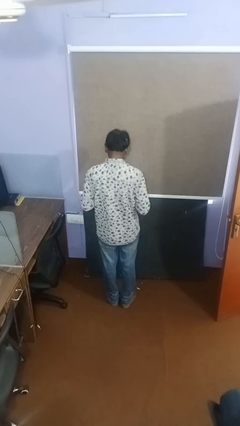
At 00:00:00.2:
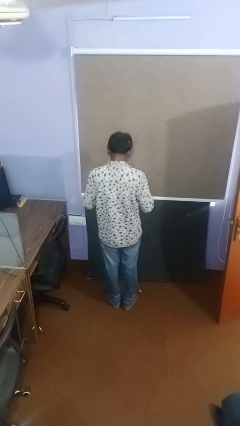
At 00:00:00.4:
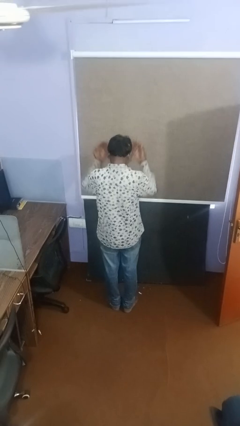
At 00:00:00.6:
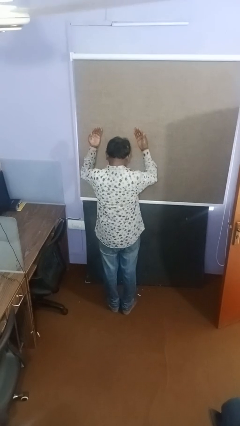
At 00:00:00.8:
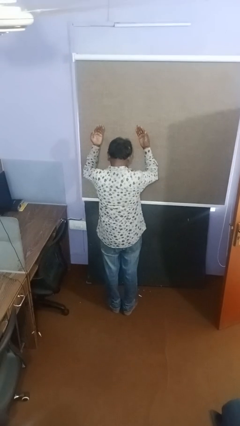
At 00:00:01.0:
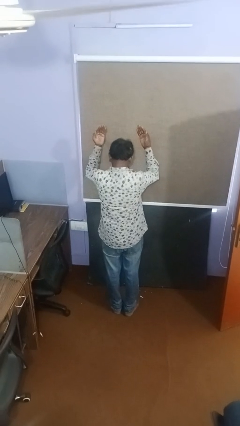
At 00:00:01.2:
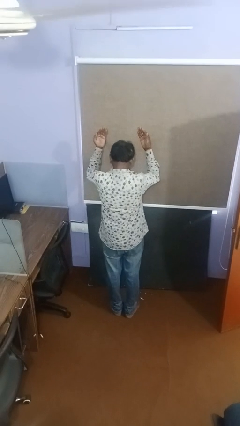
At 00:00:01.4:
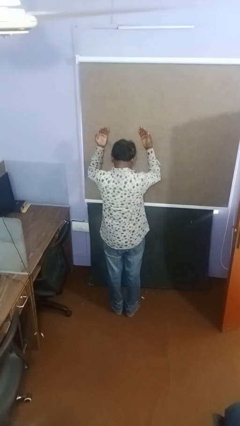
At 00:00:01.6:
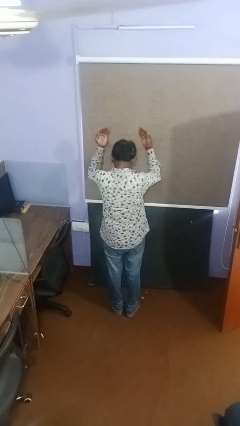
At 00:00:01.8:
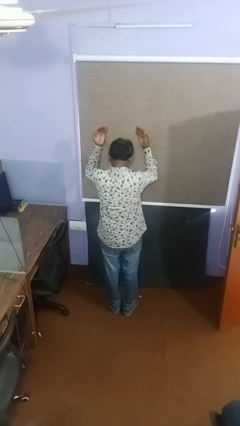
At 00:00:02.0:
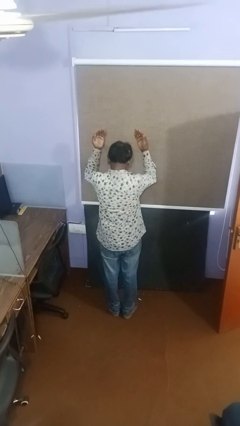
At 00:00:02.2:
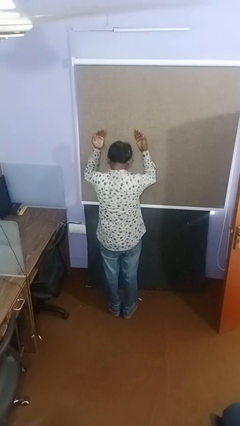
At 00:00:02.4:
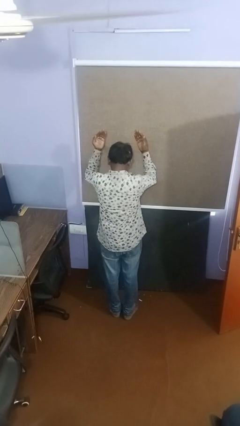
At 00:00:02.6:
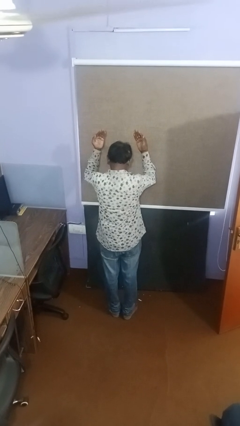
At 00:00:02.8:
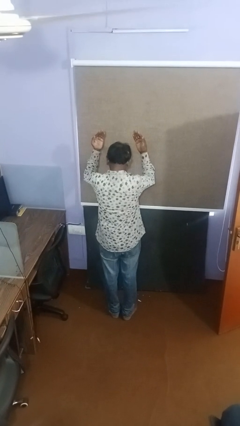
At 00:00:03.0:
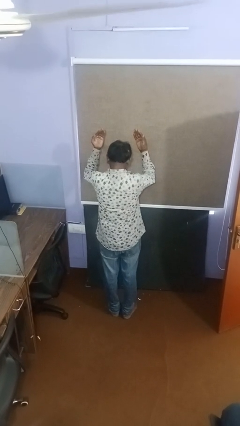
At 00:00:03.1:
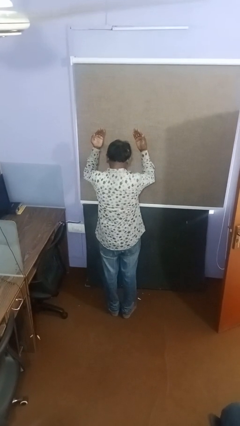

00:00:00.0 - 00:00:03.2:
person gestures swipe up

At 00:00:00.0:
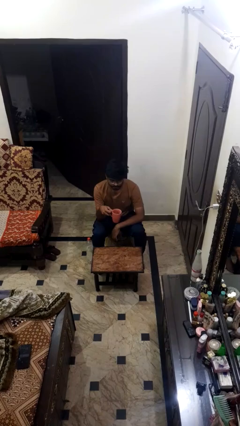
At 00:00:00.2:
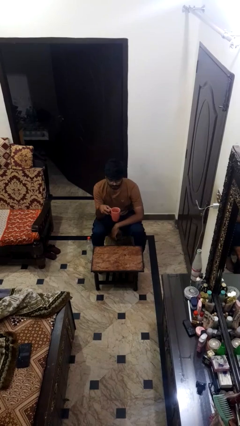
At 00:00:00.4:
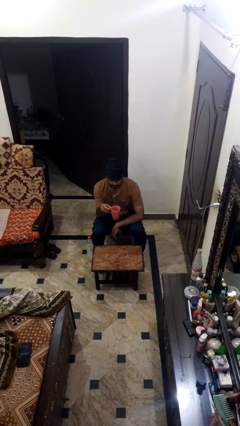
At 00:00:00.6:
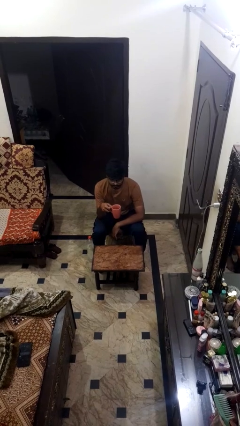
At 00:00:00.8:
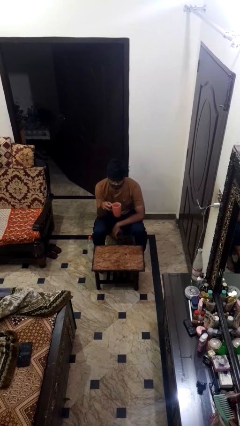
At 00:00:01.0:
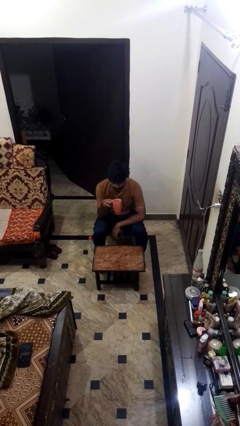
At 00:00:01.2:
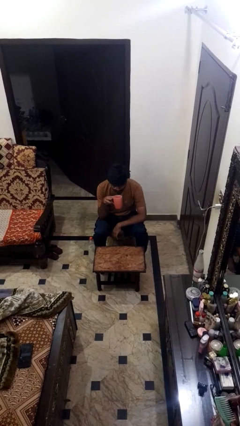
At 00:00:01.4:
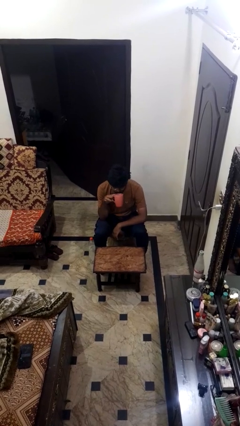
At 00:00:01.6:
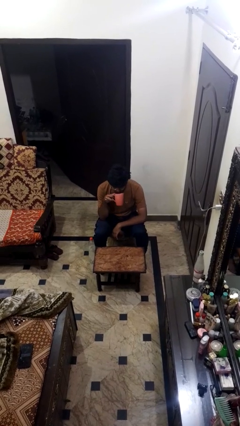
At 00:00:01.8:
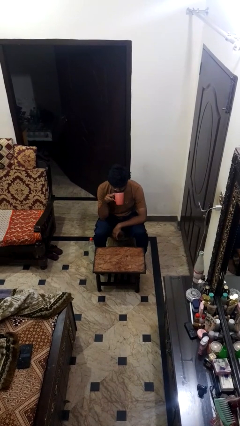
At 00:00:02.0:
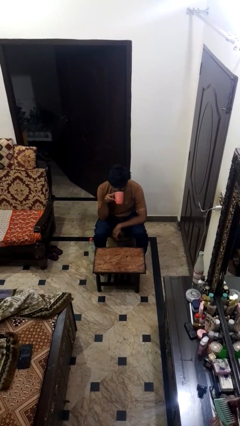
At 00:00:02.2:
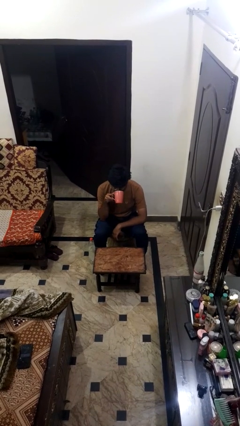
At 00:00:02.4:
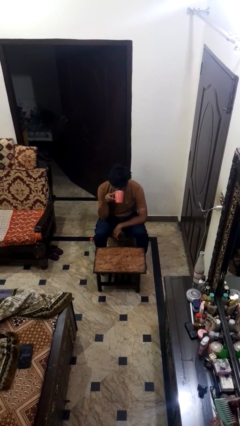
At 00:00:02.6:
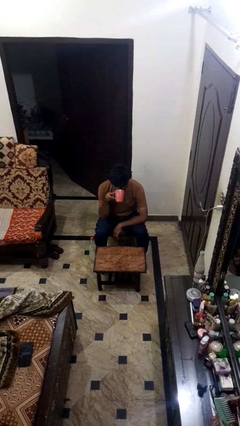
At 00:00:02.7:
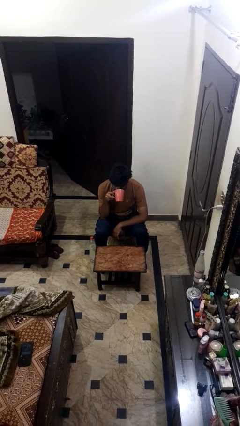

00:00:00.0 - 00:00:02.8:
person drinks from mug

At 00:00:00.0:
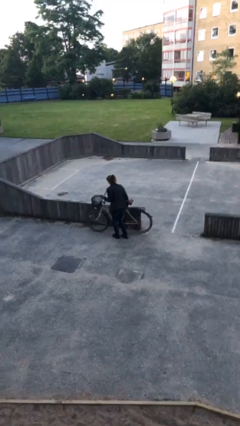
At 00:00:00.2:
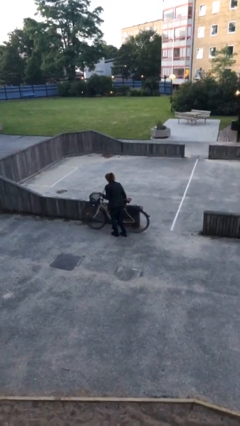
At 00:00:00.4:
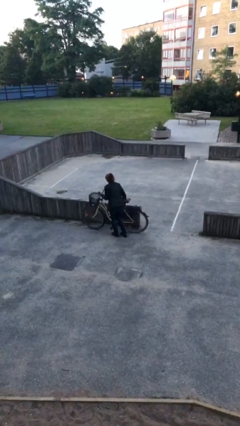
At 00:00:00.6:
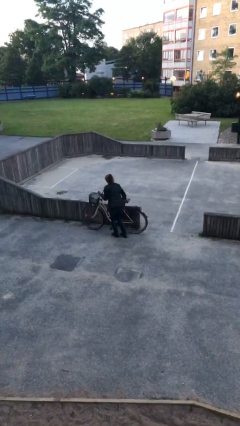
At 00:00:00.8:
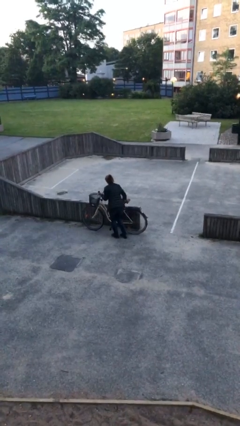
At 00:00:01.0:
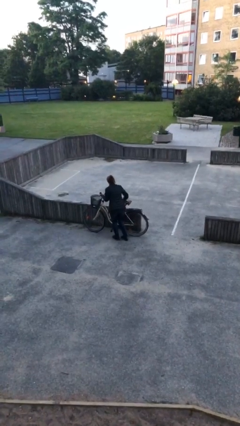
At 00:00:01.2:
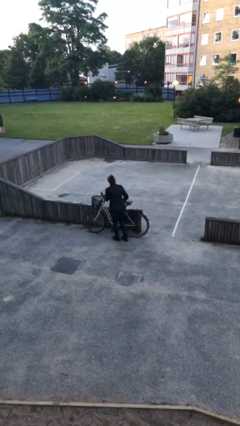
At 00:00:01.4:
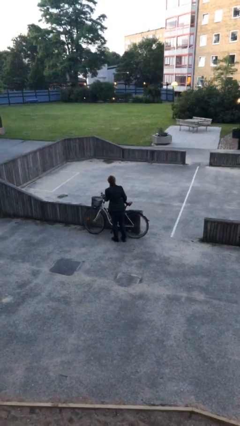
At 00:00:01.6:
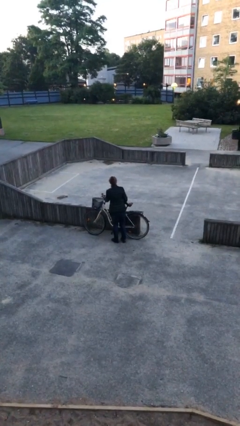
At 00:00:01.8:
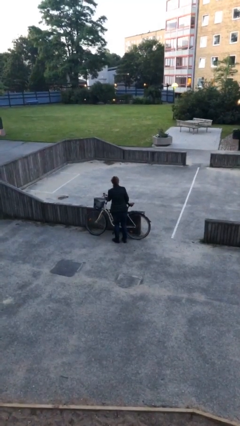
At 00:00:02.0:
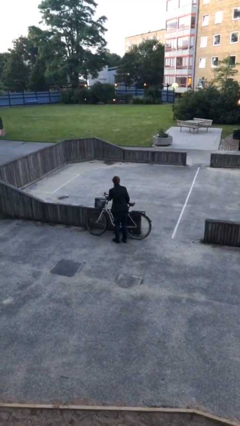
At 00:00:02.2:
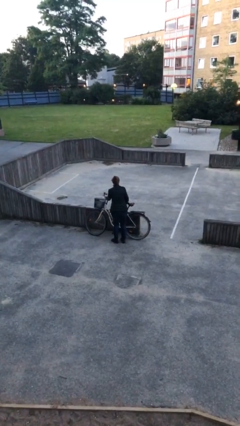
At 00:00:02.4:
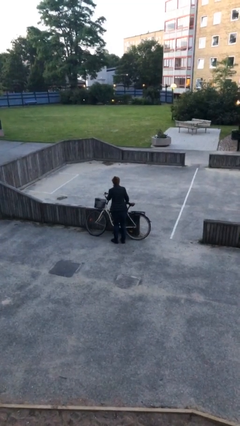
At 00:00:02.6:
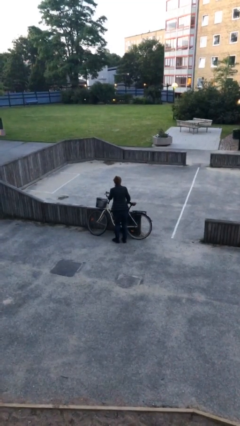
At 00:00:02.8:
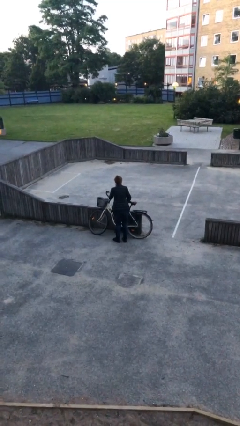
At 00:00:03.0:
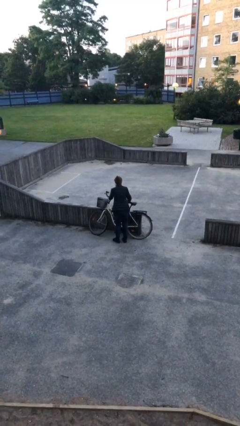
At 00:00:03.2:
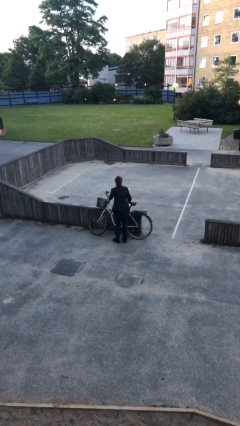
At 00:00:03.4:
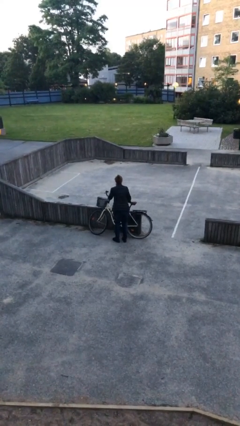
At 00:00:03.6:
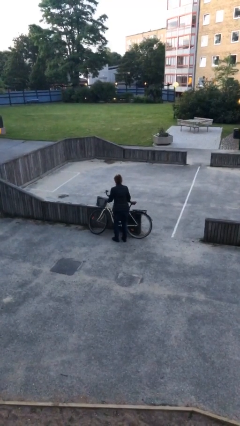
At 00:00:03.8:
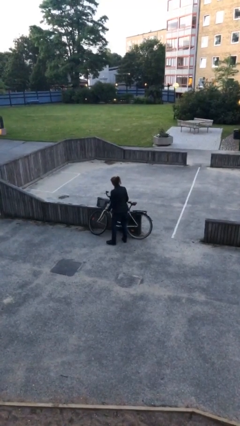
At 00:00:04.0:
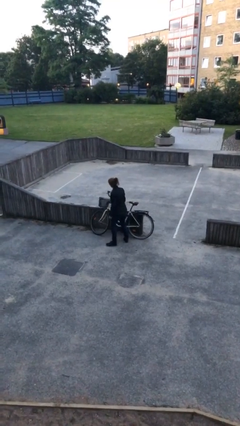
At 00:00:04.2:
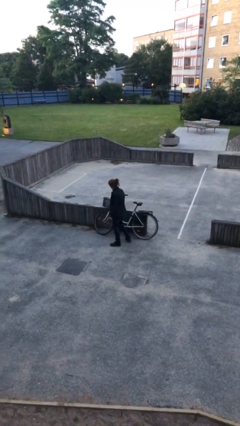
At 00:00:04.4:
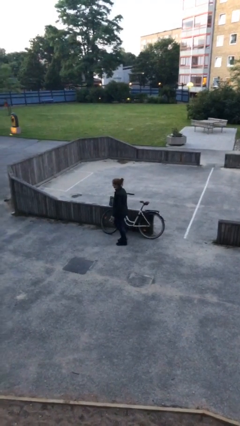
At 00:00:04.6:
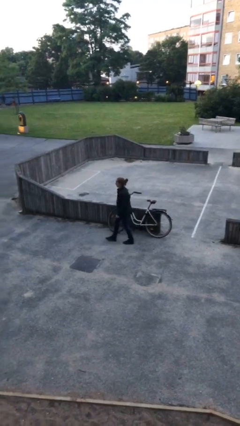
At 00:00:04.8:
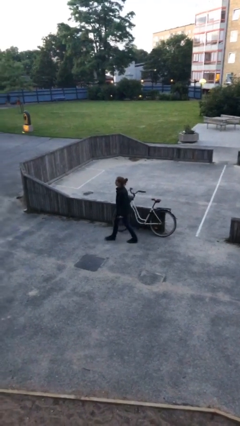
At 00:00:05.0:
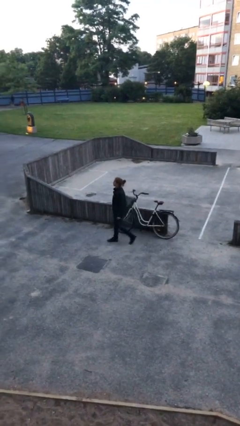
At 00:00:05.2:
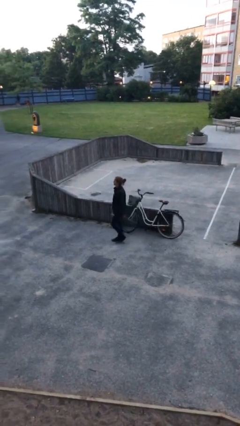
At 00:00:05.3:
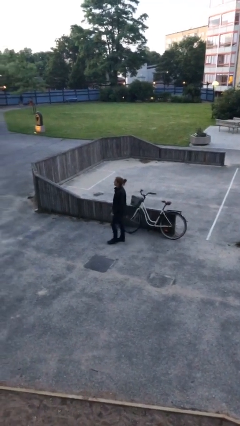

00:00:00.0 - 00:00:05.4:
person puts down object on floor

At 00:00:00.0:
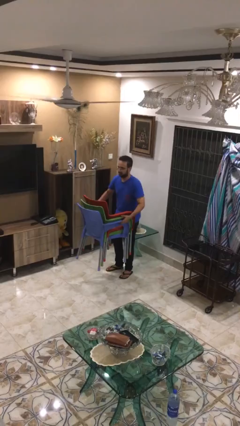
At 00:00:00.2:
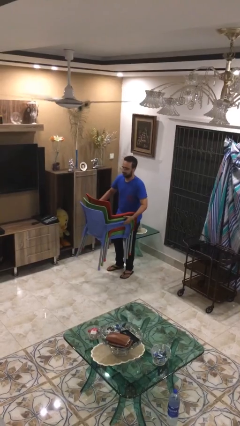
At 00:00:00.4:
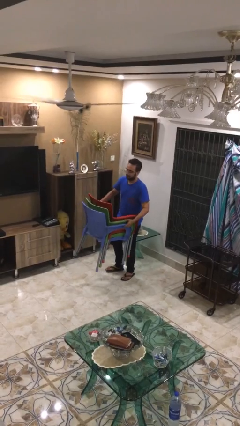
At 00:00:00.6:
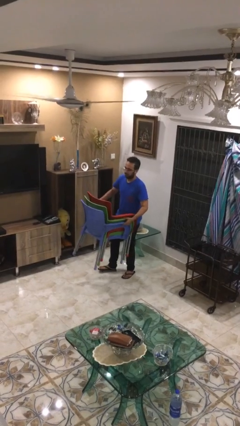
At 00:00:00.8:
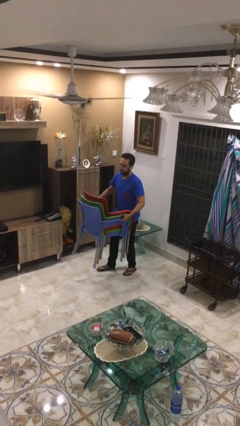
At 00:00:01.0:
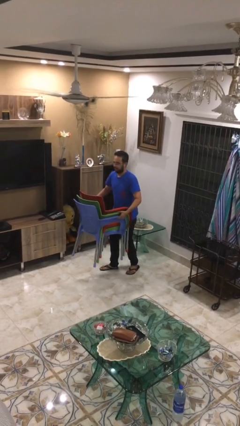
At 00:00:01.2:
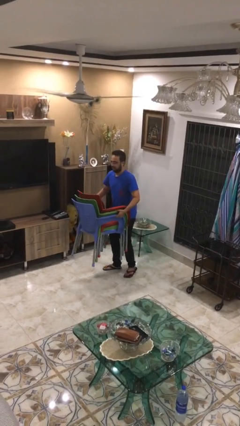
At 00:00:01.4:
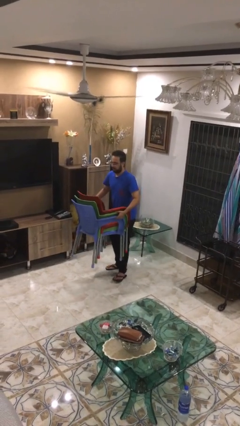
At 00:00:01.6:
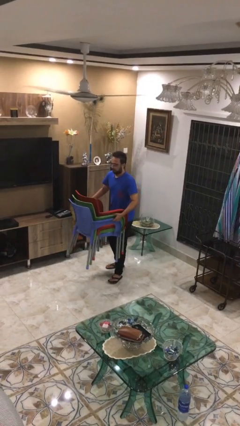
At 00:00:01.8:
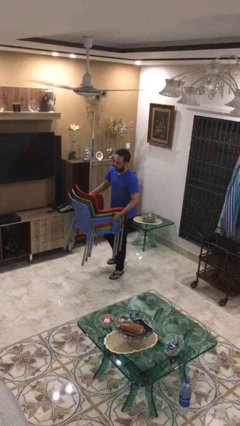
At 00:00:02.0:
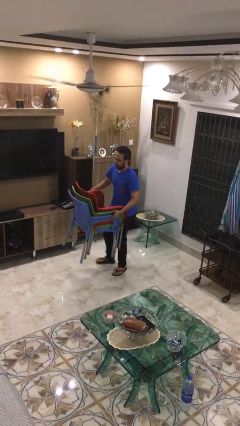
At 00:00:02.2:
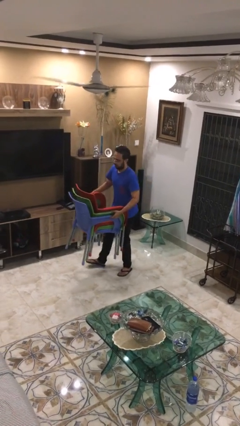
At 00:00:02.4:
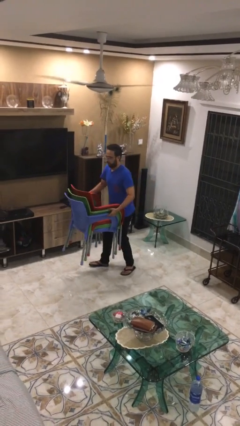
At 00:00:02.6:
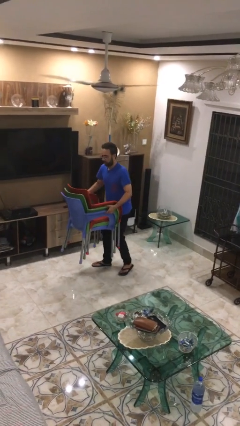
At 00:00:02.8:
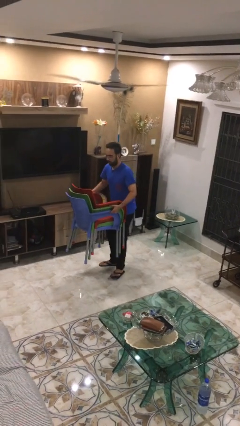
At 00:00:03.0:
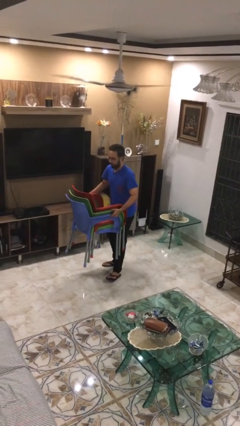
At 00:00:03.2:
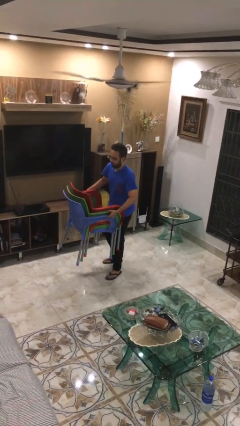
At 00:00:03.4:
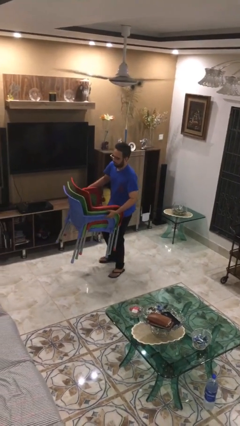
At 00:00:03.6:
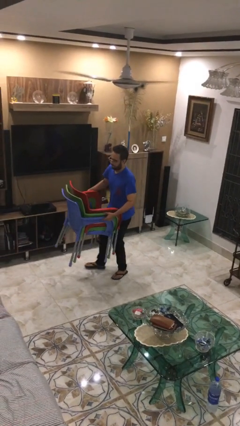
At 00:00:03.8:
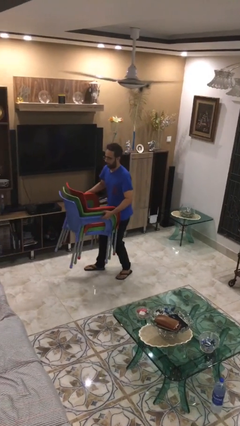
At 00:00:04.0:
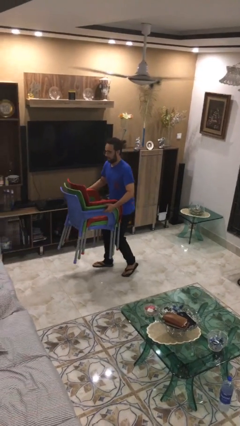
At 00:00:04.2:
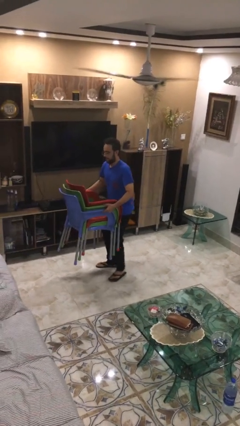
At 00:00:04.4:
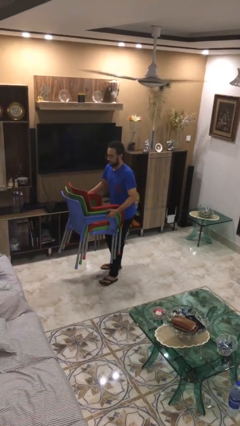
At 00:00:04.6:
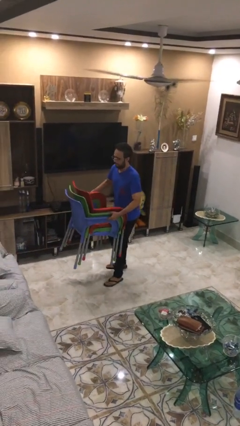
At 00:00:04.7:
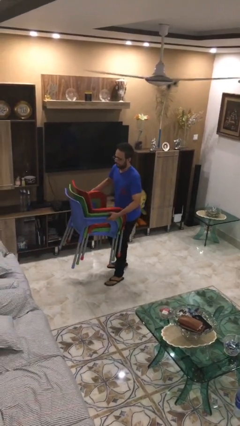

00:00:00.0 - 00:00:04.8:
person carries heavy object

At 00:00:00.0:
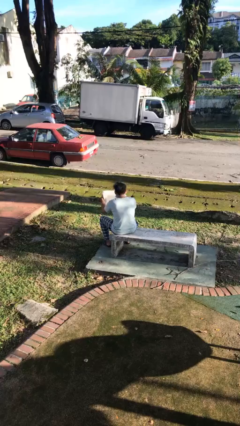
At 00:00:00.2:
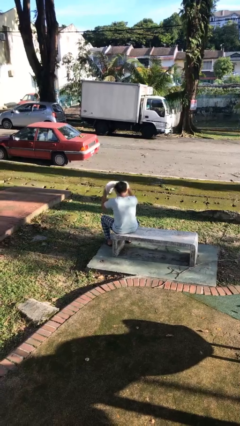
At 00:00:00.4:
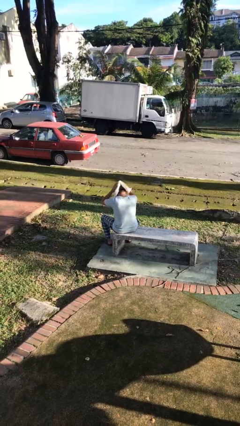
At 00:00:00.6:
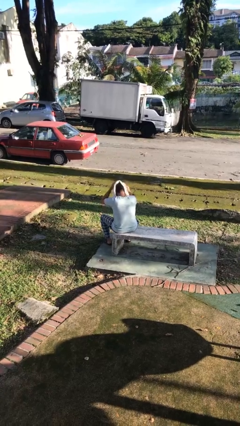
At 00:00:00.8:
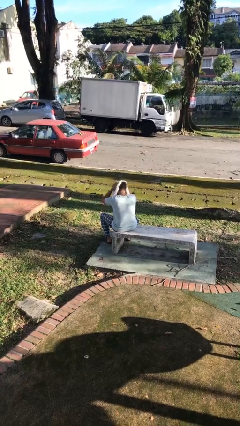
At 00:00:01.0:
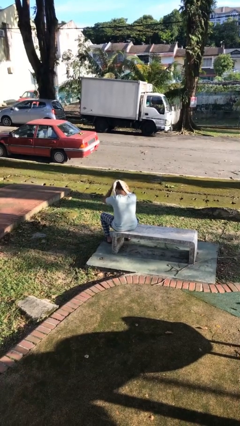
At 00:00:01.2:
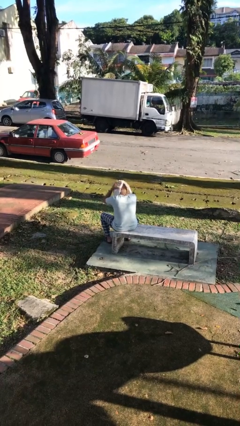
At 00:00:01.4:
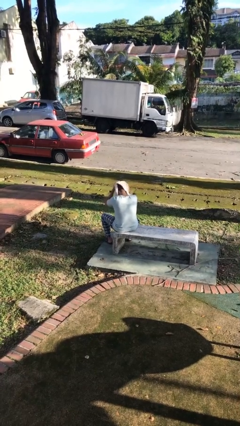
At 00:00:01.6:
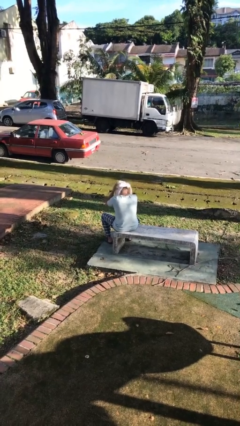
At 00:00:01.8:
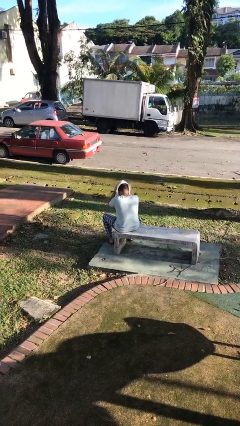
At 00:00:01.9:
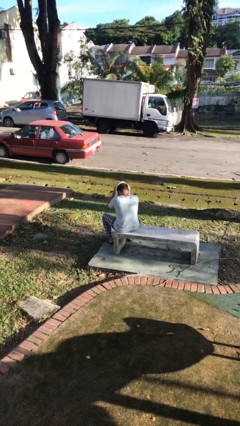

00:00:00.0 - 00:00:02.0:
person dries hair with towel
